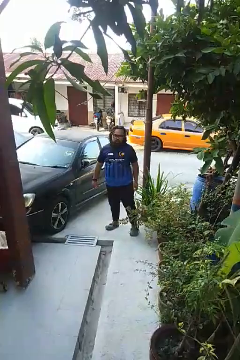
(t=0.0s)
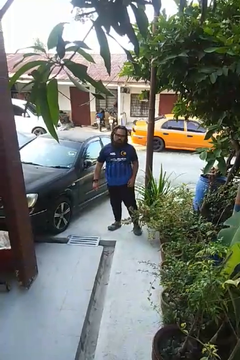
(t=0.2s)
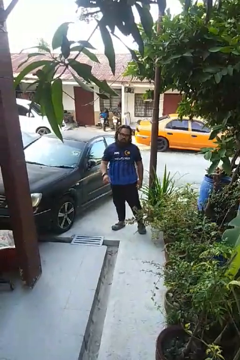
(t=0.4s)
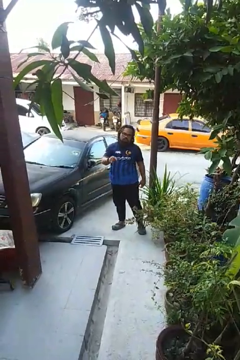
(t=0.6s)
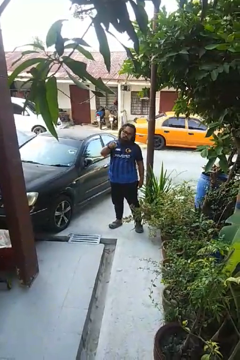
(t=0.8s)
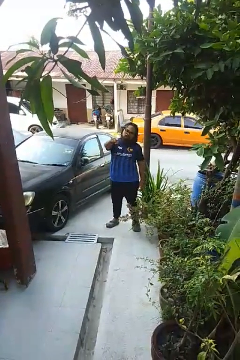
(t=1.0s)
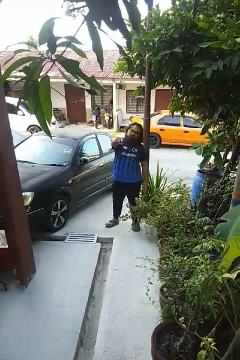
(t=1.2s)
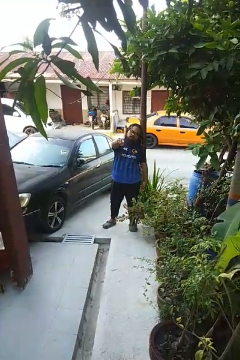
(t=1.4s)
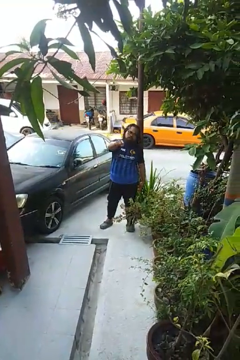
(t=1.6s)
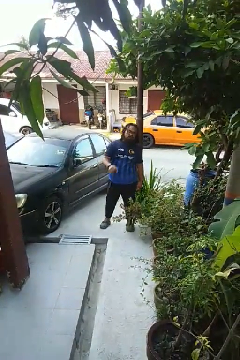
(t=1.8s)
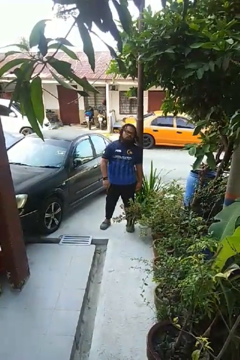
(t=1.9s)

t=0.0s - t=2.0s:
person points at person

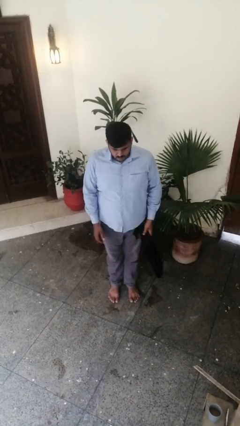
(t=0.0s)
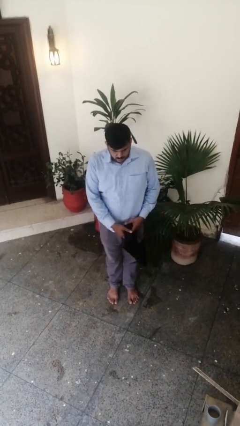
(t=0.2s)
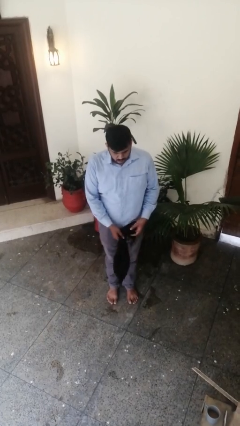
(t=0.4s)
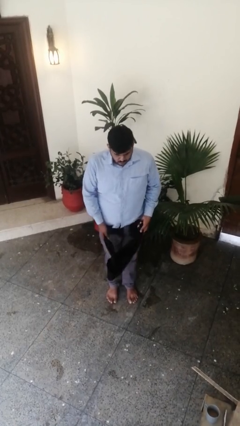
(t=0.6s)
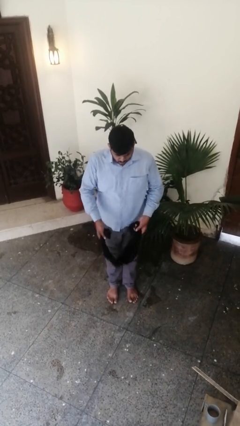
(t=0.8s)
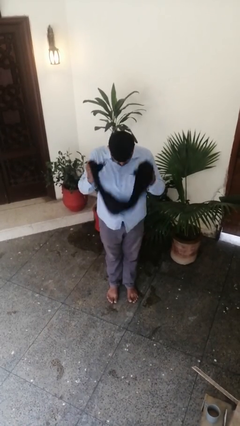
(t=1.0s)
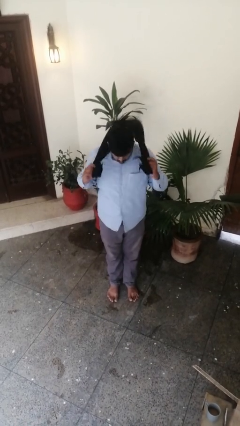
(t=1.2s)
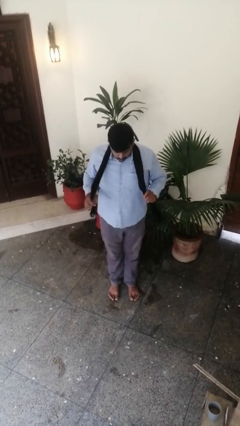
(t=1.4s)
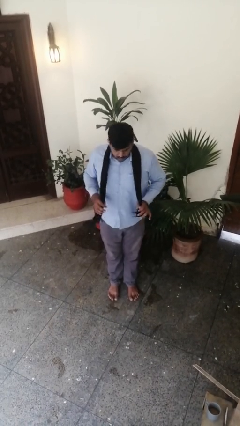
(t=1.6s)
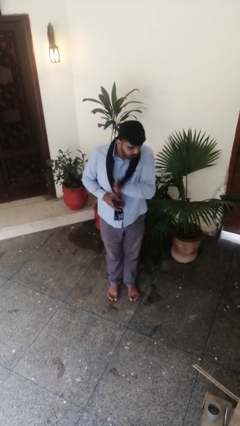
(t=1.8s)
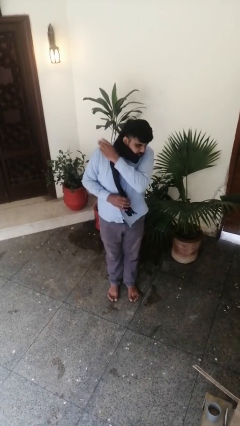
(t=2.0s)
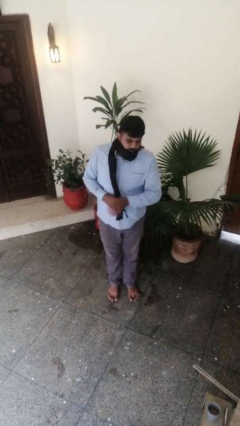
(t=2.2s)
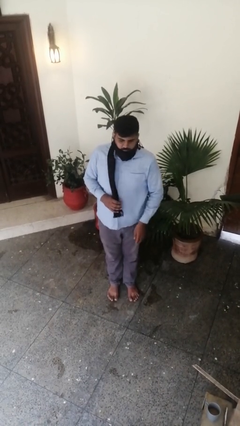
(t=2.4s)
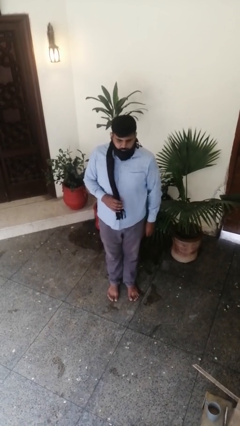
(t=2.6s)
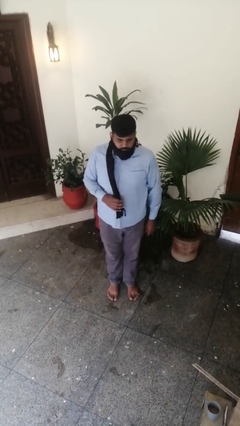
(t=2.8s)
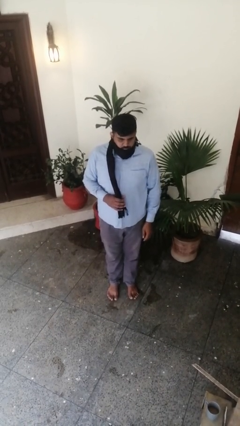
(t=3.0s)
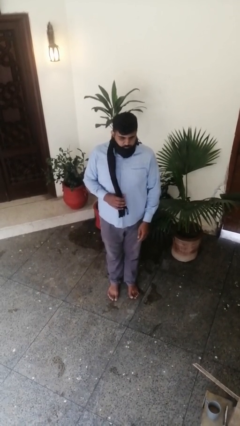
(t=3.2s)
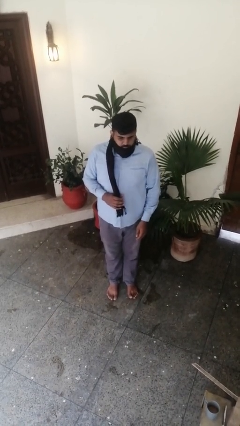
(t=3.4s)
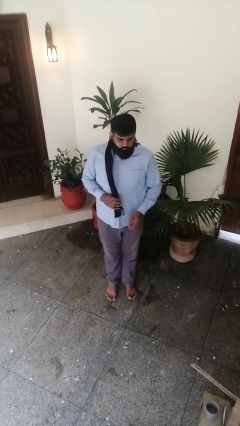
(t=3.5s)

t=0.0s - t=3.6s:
person puts on scarf

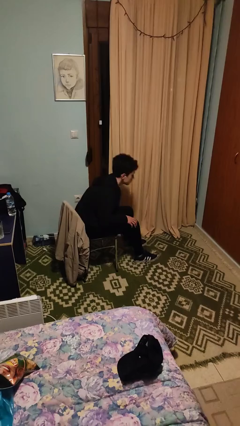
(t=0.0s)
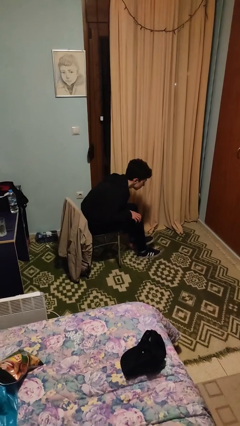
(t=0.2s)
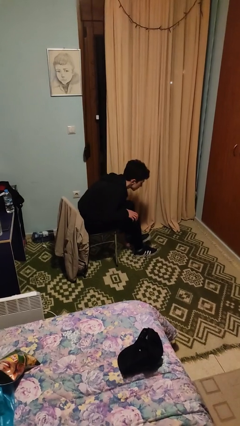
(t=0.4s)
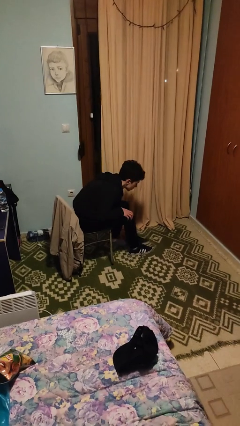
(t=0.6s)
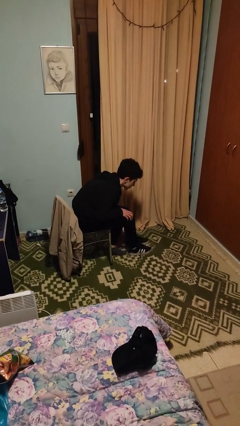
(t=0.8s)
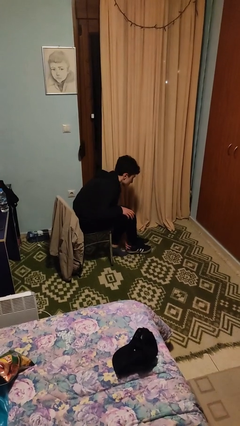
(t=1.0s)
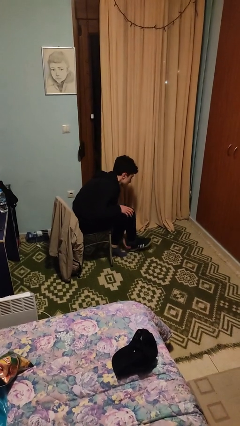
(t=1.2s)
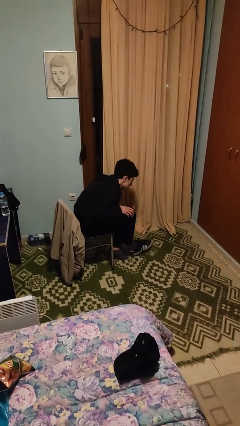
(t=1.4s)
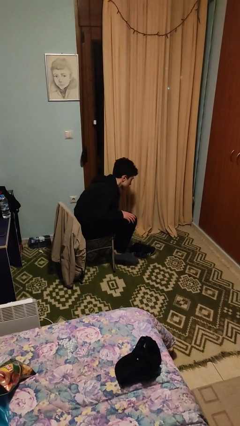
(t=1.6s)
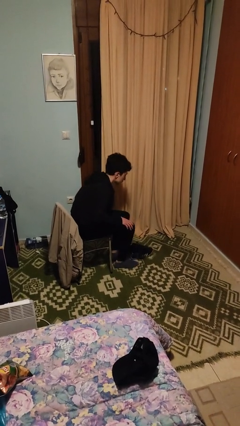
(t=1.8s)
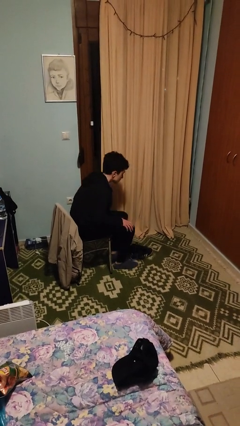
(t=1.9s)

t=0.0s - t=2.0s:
person takes off shoes

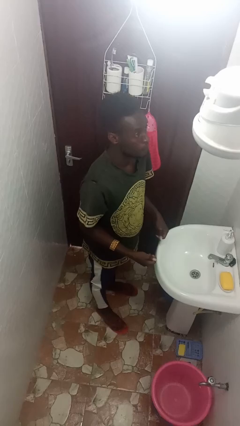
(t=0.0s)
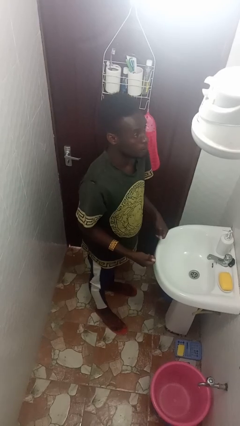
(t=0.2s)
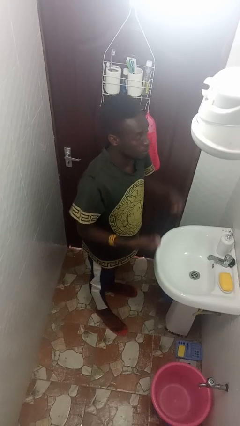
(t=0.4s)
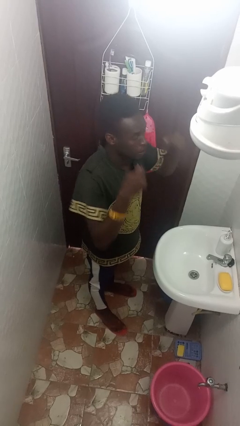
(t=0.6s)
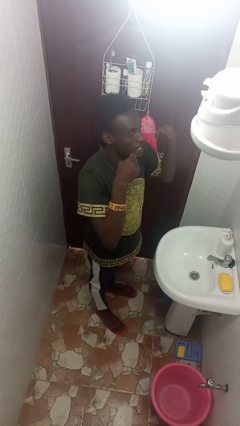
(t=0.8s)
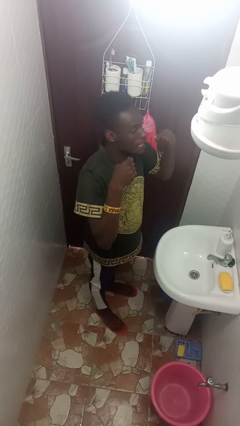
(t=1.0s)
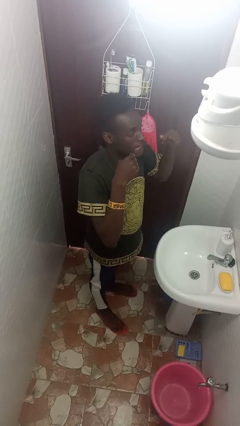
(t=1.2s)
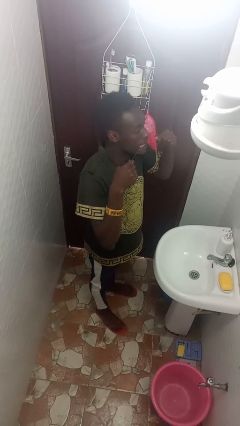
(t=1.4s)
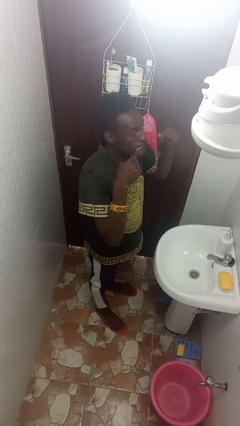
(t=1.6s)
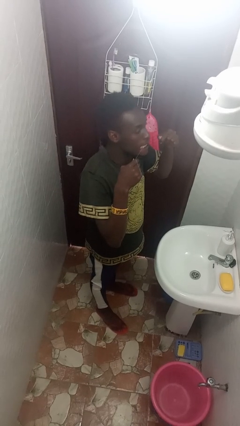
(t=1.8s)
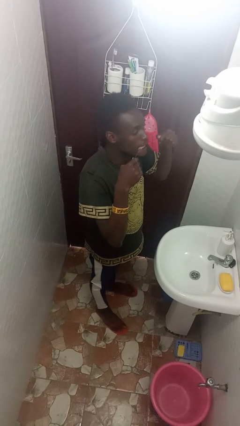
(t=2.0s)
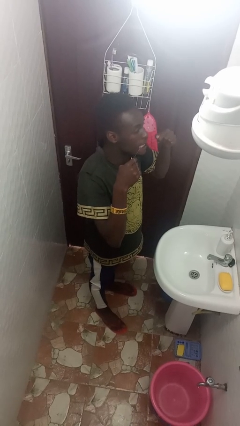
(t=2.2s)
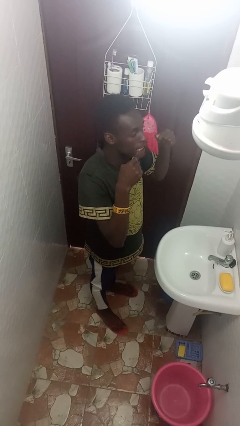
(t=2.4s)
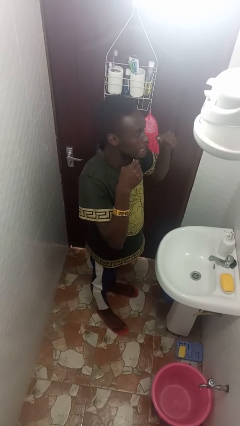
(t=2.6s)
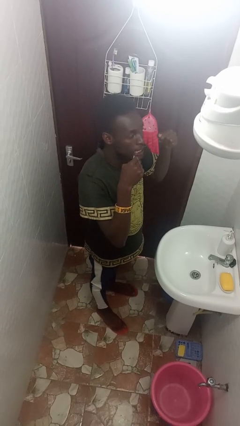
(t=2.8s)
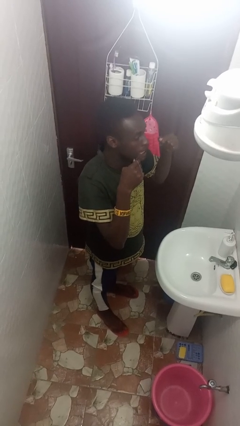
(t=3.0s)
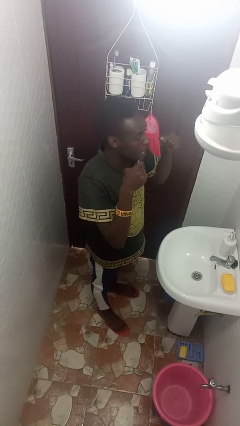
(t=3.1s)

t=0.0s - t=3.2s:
person flosses

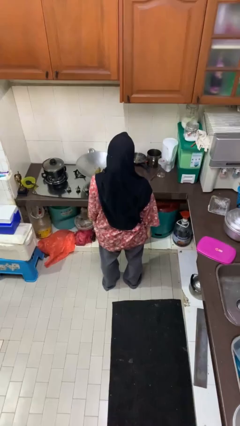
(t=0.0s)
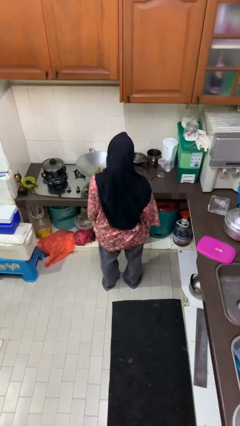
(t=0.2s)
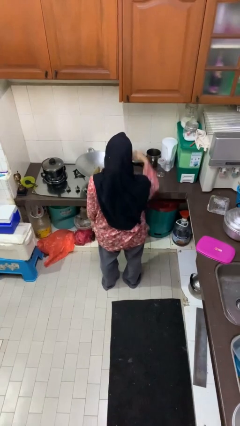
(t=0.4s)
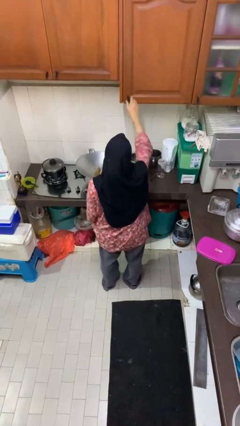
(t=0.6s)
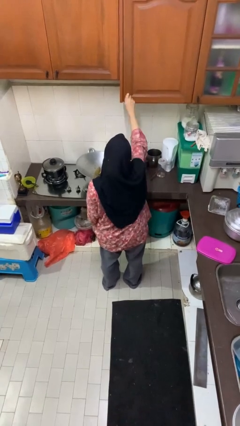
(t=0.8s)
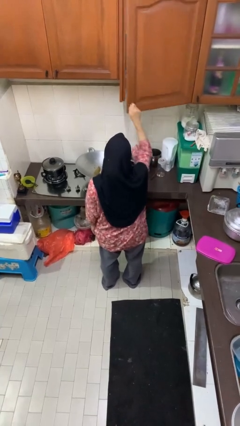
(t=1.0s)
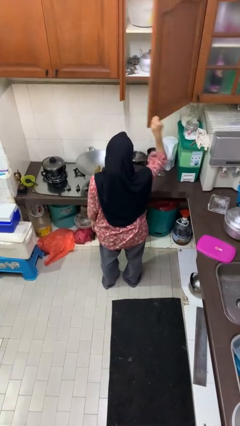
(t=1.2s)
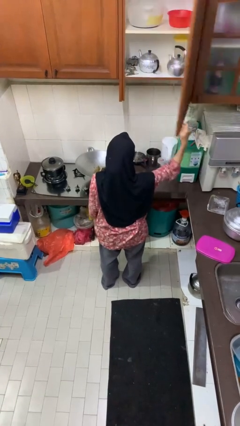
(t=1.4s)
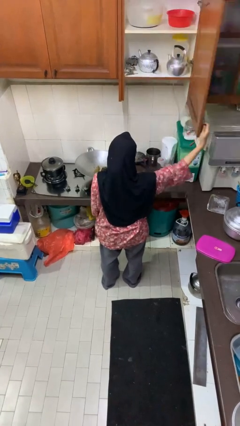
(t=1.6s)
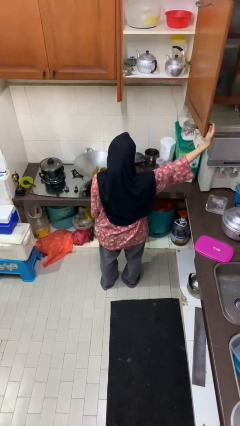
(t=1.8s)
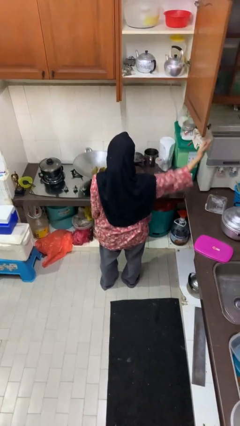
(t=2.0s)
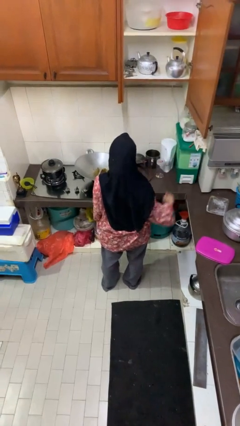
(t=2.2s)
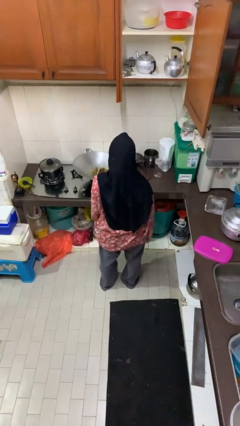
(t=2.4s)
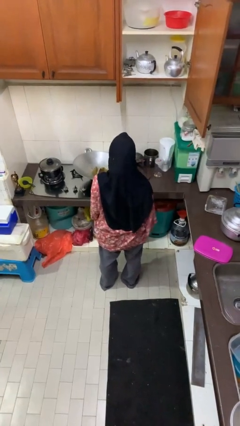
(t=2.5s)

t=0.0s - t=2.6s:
person opens cabinet

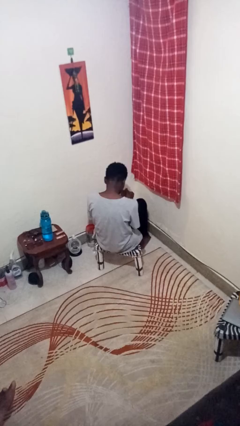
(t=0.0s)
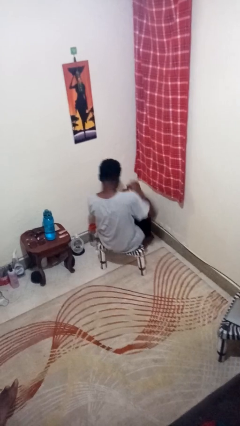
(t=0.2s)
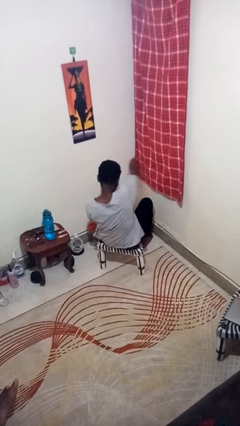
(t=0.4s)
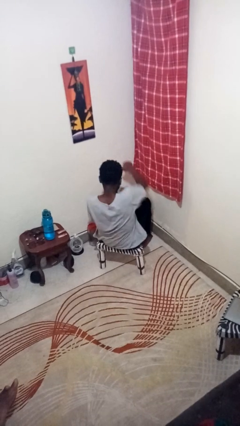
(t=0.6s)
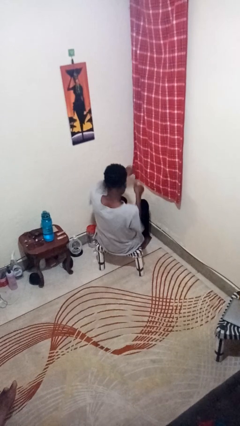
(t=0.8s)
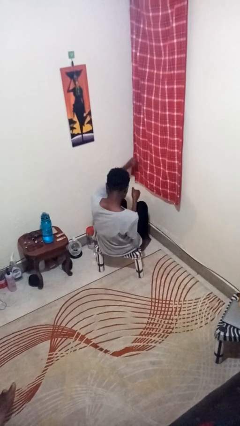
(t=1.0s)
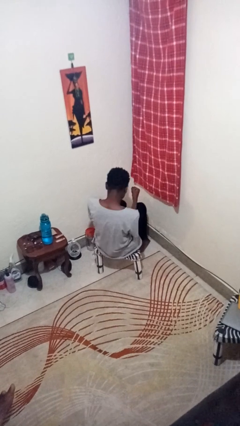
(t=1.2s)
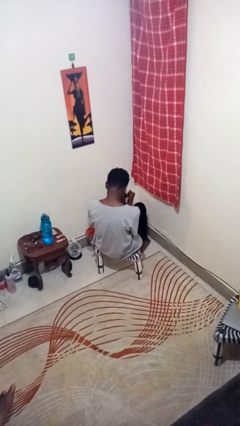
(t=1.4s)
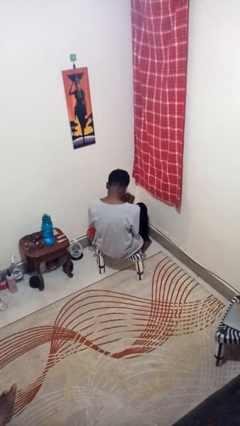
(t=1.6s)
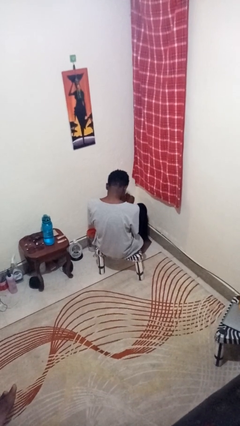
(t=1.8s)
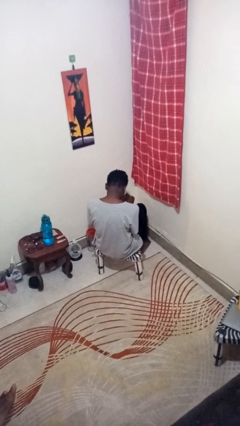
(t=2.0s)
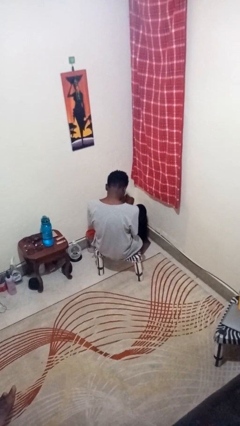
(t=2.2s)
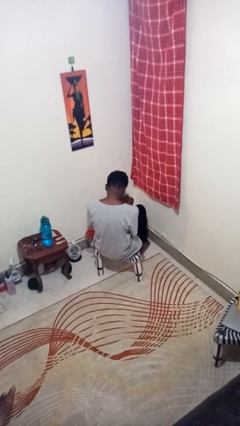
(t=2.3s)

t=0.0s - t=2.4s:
person punches

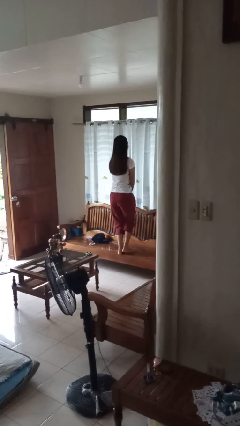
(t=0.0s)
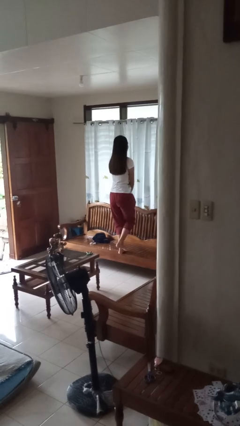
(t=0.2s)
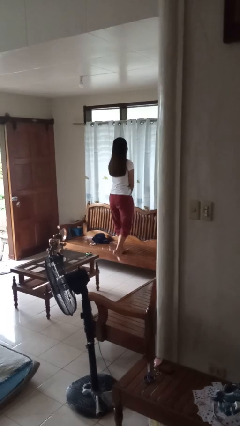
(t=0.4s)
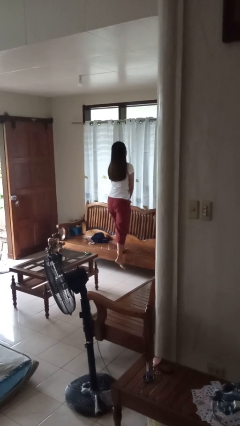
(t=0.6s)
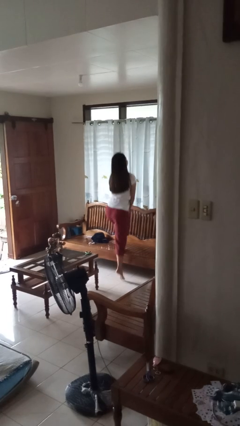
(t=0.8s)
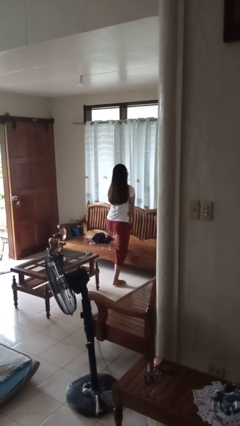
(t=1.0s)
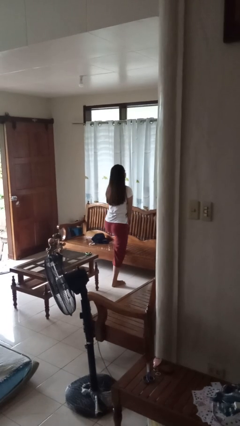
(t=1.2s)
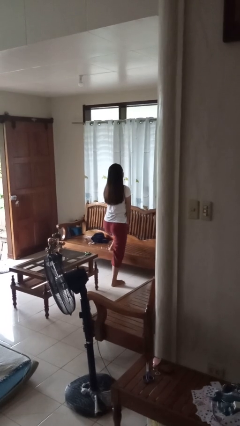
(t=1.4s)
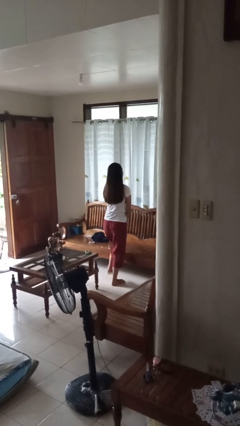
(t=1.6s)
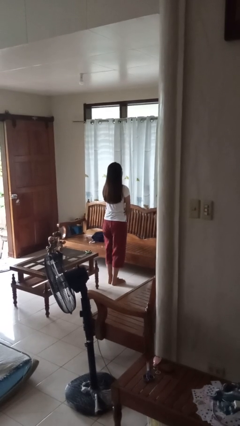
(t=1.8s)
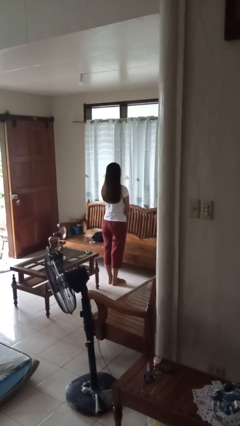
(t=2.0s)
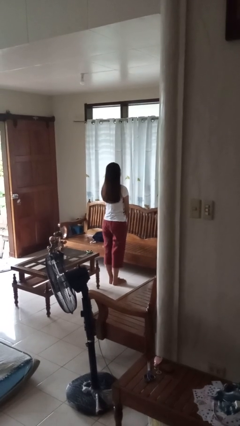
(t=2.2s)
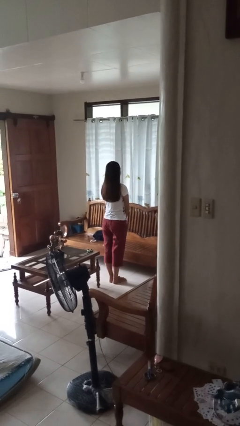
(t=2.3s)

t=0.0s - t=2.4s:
person climbs off chair
